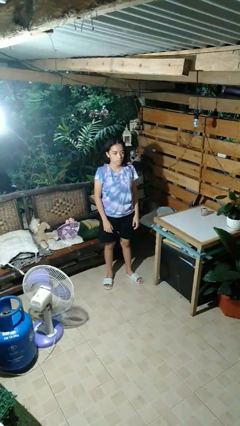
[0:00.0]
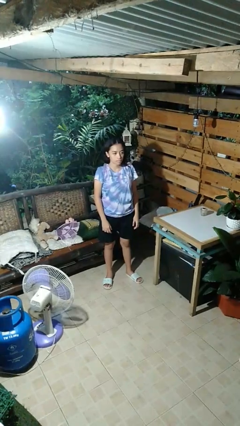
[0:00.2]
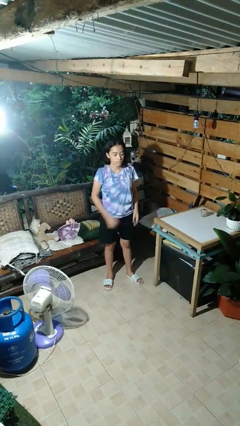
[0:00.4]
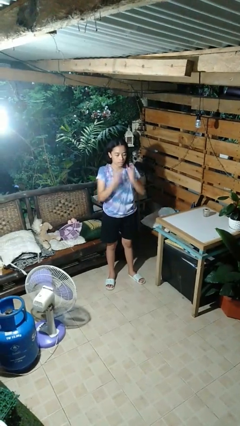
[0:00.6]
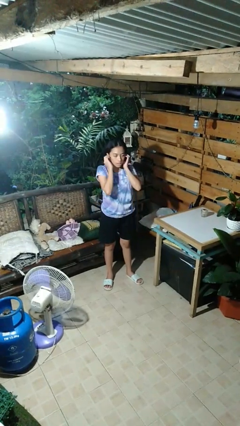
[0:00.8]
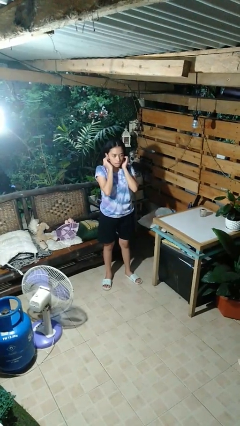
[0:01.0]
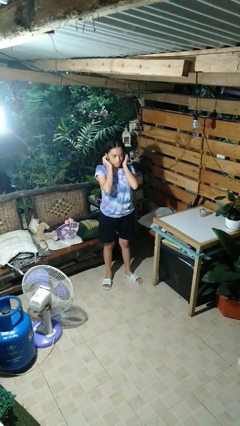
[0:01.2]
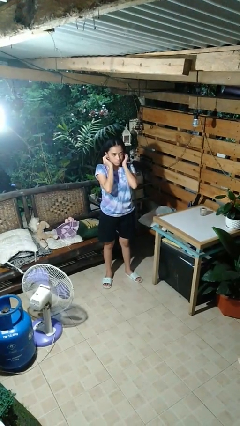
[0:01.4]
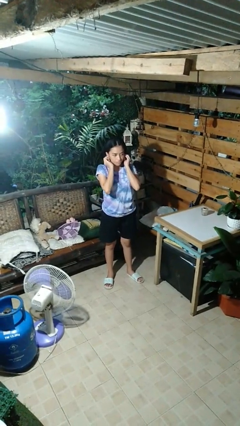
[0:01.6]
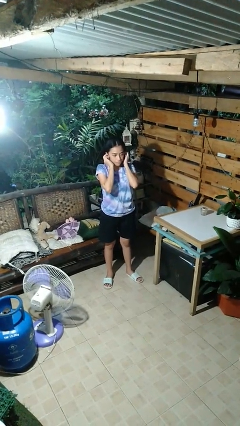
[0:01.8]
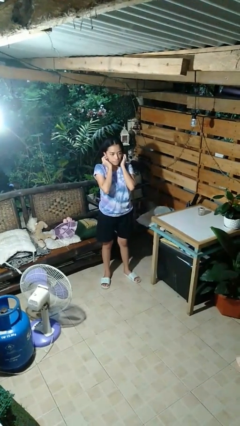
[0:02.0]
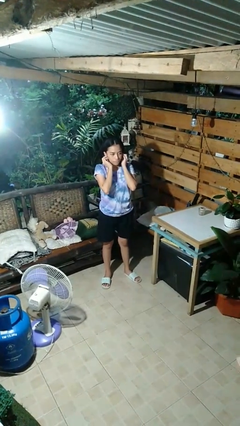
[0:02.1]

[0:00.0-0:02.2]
person touches earlobe

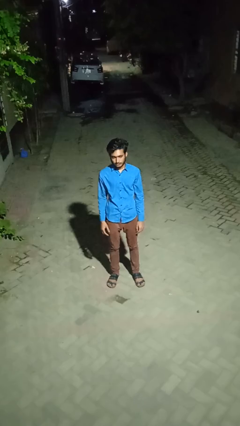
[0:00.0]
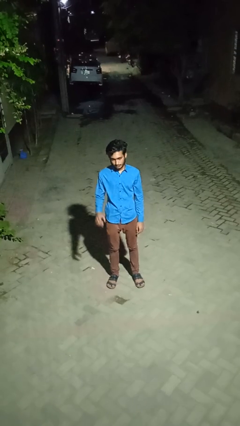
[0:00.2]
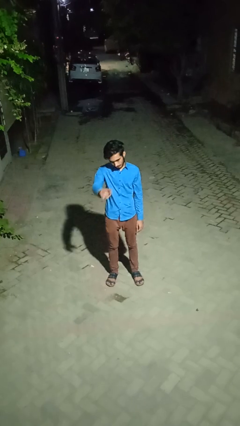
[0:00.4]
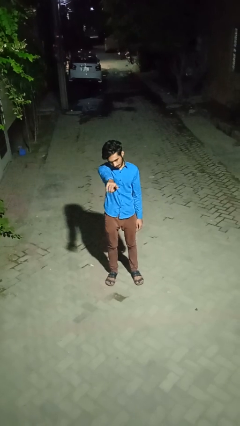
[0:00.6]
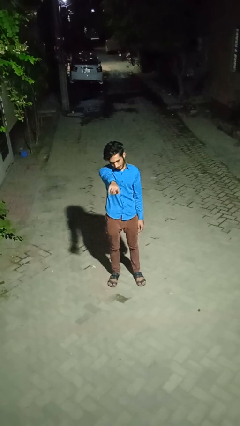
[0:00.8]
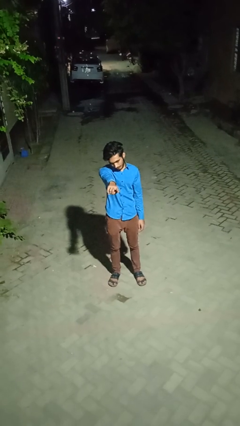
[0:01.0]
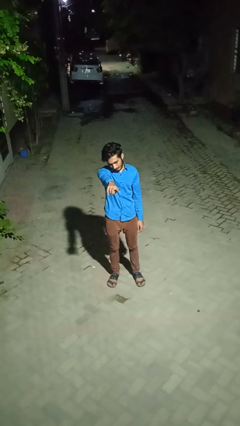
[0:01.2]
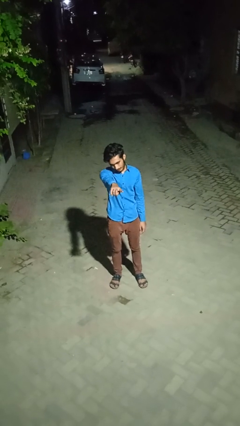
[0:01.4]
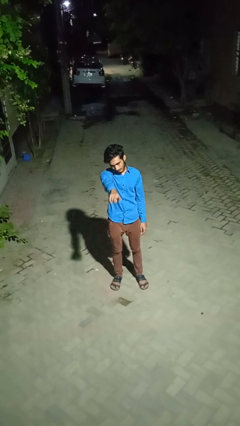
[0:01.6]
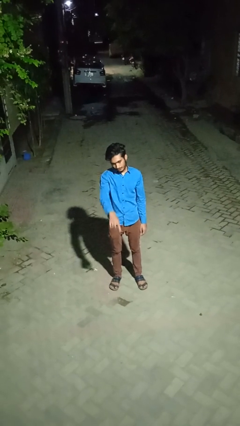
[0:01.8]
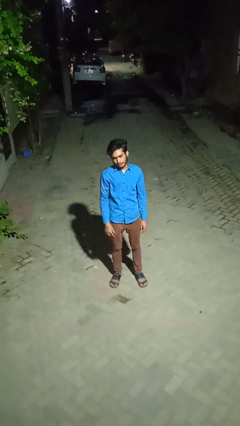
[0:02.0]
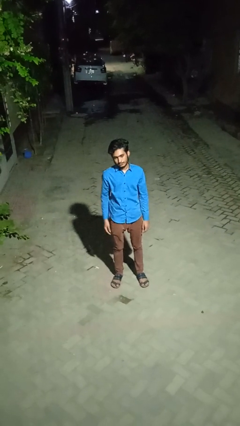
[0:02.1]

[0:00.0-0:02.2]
person points at person

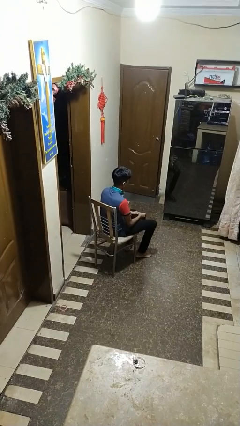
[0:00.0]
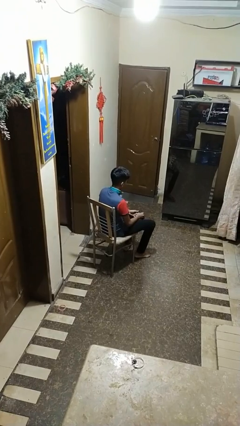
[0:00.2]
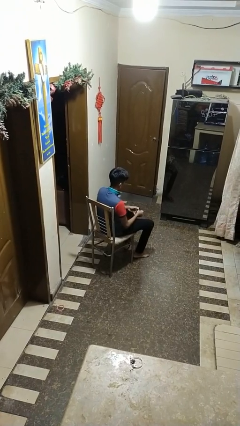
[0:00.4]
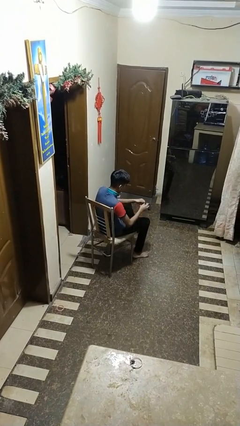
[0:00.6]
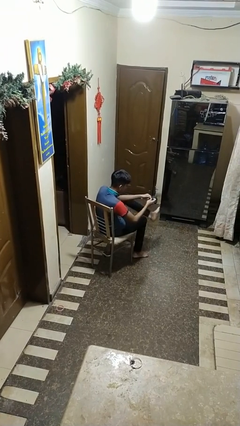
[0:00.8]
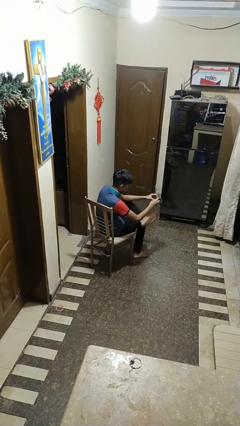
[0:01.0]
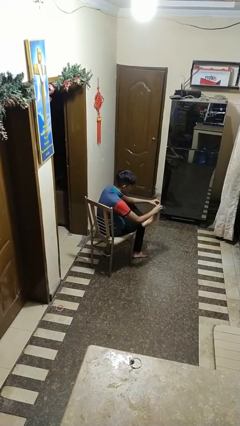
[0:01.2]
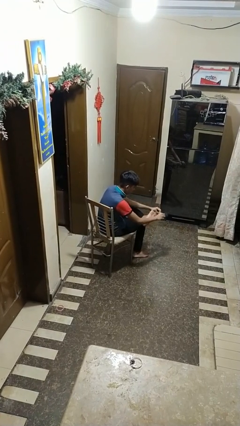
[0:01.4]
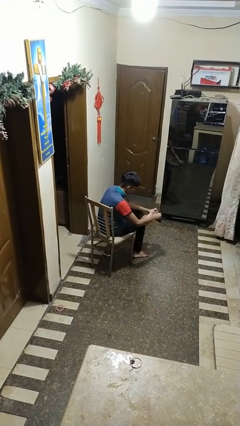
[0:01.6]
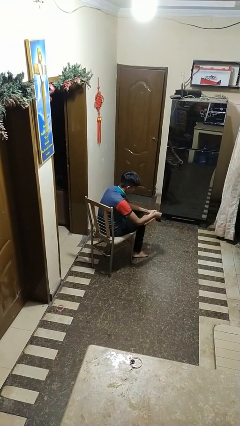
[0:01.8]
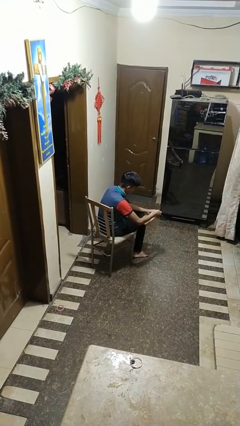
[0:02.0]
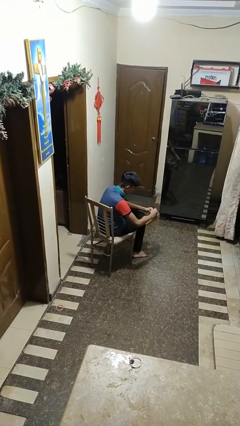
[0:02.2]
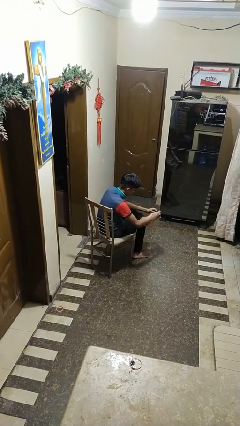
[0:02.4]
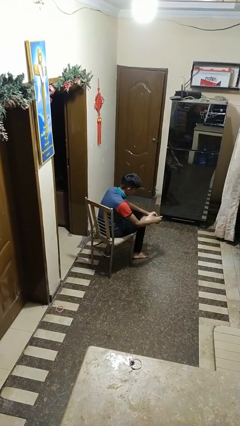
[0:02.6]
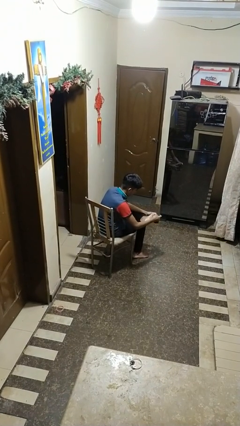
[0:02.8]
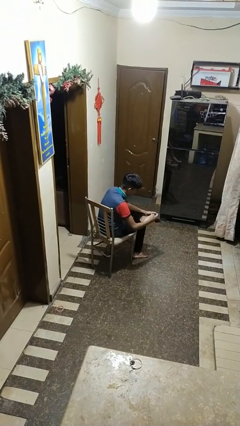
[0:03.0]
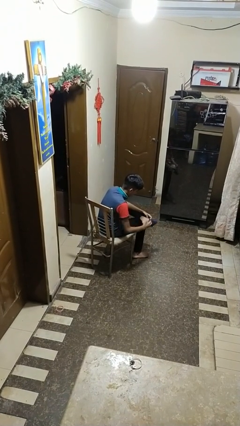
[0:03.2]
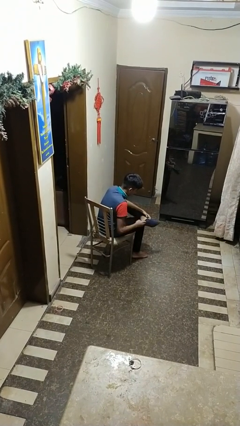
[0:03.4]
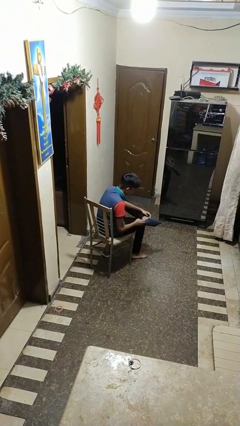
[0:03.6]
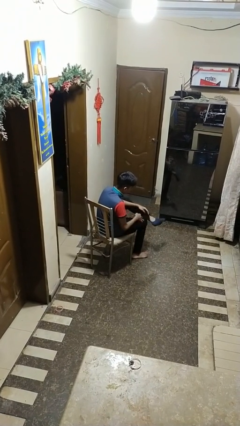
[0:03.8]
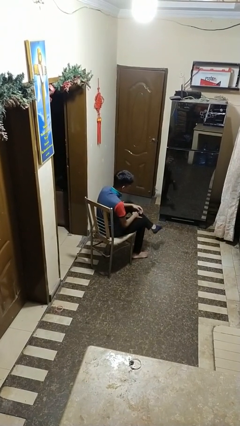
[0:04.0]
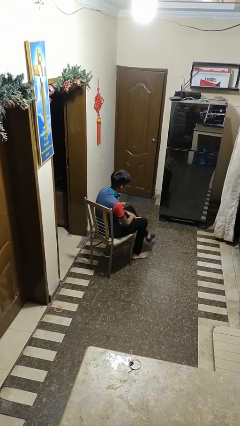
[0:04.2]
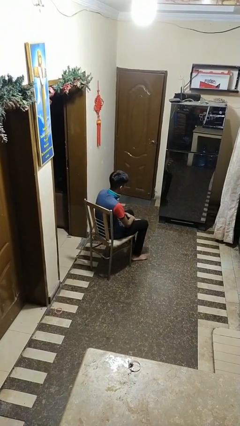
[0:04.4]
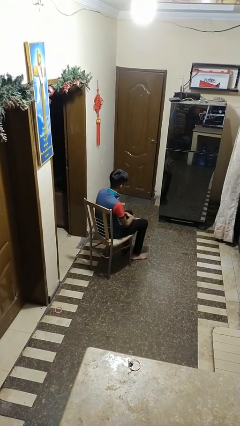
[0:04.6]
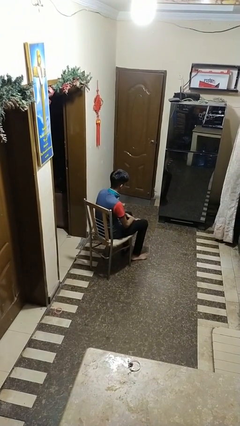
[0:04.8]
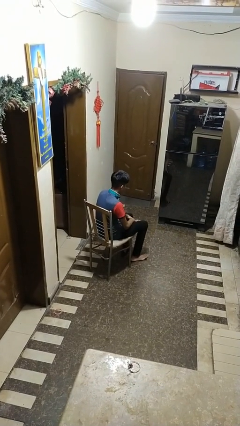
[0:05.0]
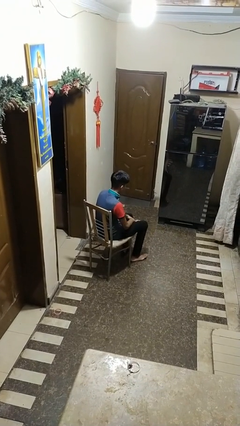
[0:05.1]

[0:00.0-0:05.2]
person puts on socks

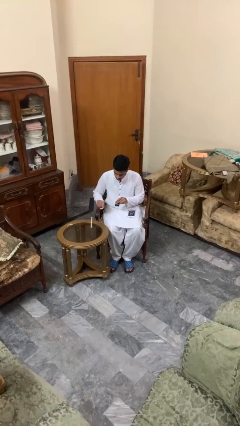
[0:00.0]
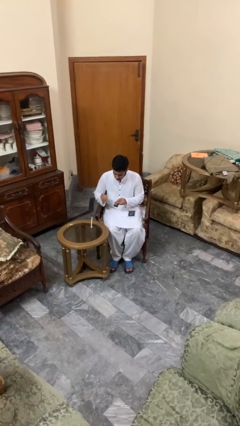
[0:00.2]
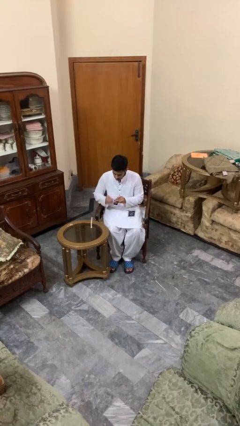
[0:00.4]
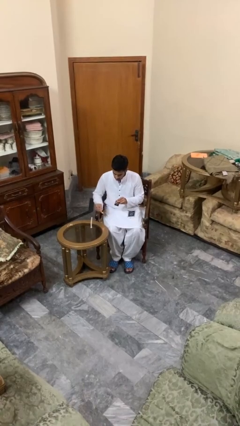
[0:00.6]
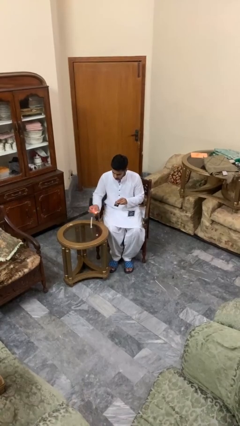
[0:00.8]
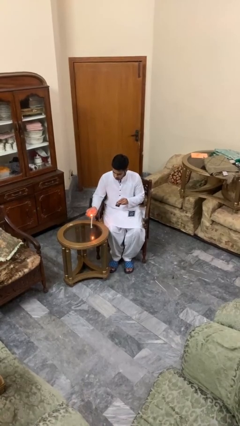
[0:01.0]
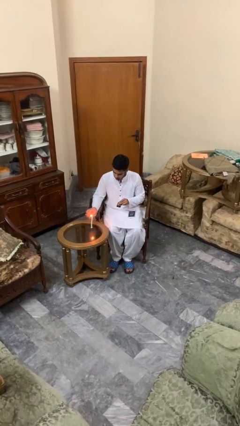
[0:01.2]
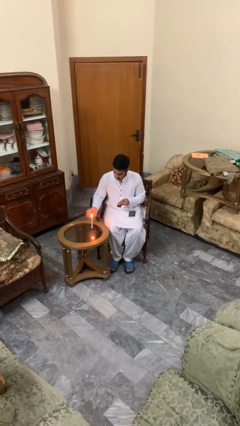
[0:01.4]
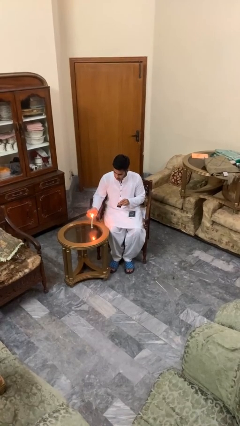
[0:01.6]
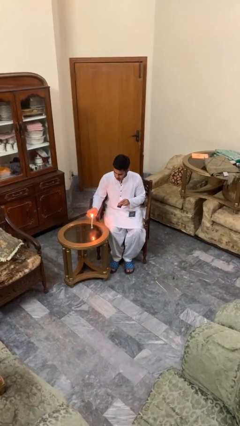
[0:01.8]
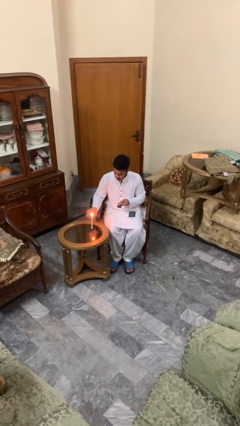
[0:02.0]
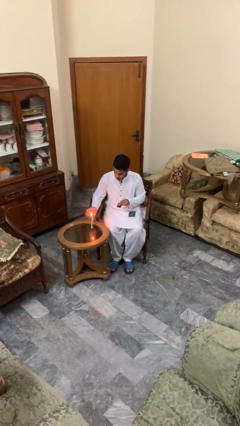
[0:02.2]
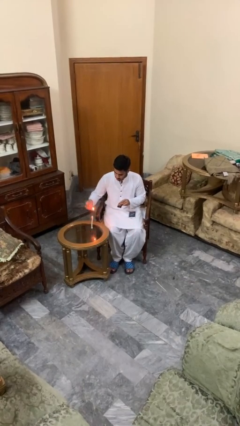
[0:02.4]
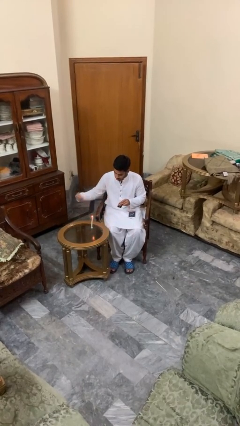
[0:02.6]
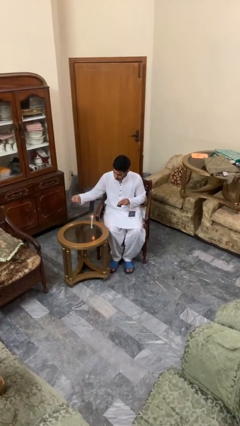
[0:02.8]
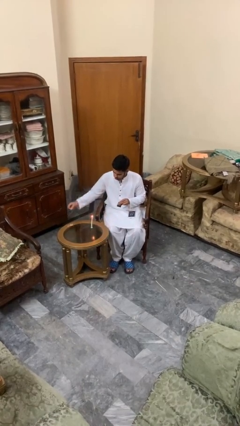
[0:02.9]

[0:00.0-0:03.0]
person lights candle

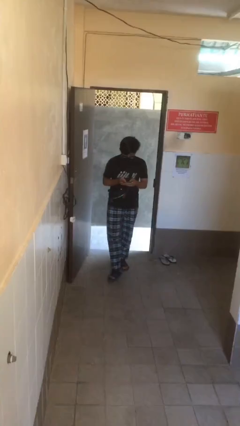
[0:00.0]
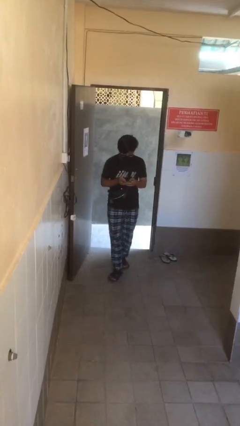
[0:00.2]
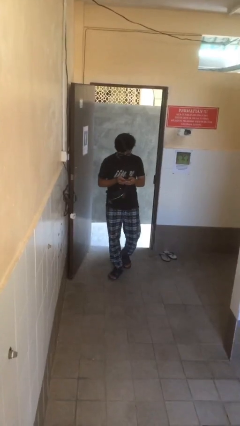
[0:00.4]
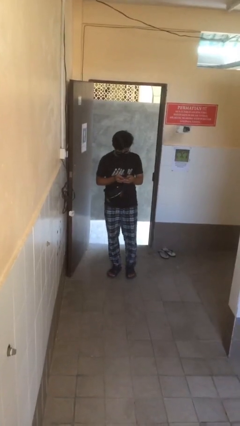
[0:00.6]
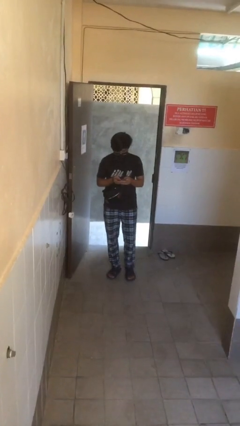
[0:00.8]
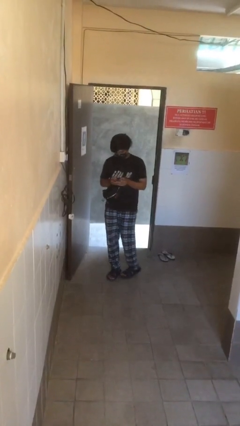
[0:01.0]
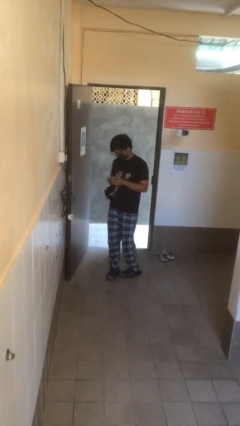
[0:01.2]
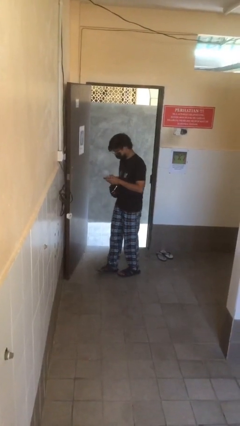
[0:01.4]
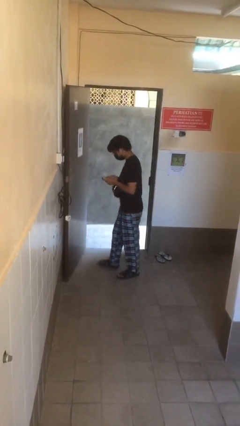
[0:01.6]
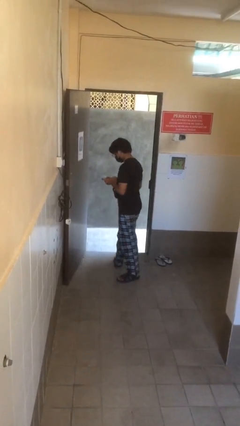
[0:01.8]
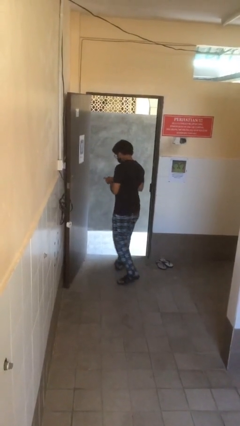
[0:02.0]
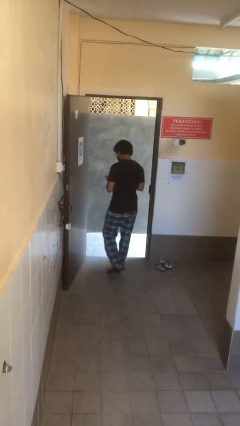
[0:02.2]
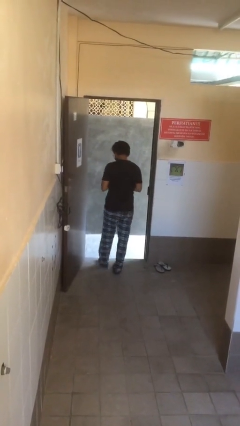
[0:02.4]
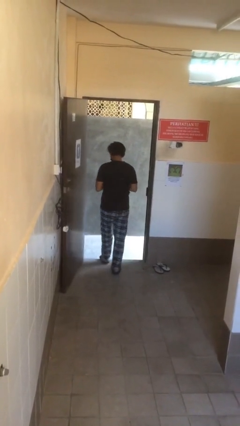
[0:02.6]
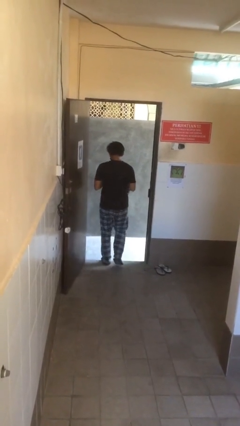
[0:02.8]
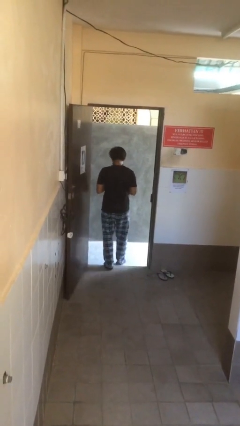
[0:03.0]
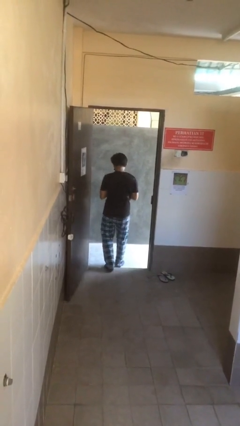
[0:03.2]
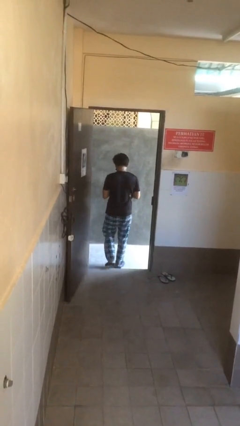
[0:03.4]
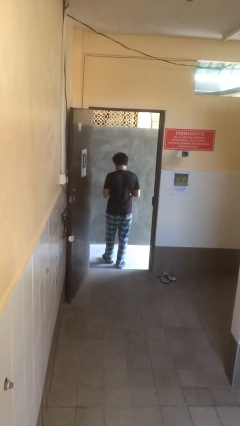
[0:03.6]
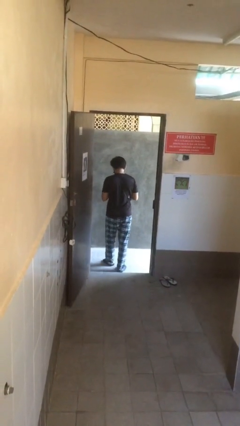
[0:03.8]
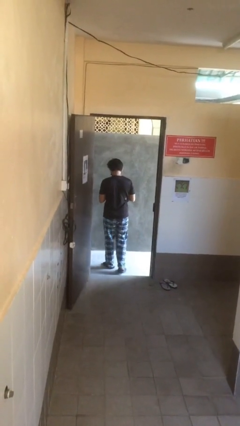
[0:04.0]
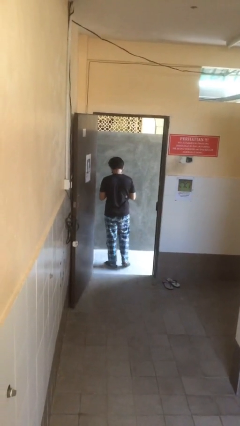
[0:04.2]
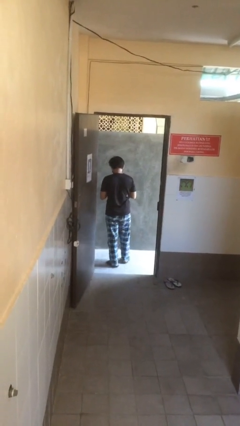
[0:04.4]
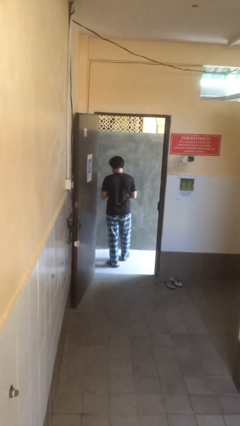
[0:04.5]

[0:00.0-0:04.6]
person exits scene through structure
